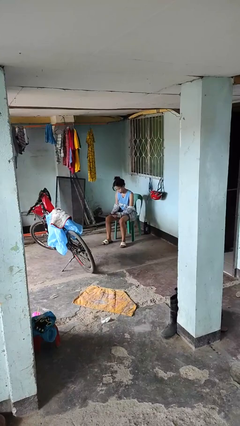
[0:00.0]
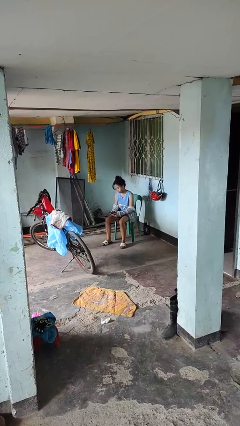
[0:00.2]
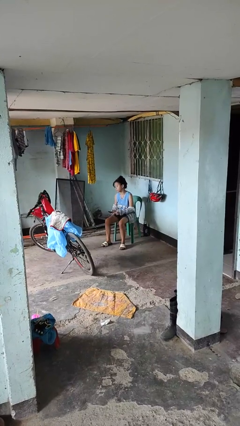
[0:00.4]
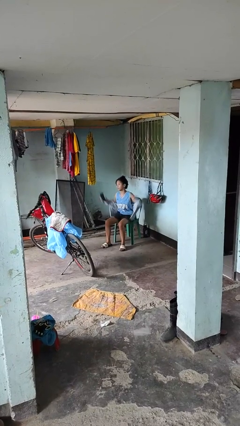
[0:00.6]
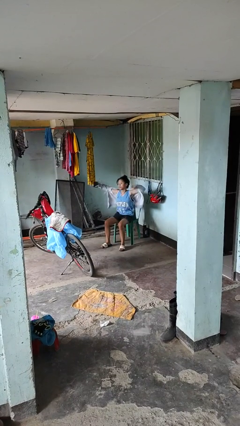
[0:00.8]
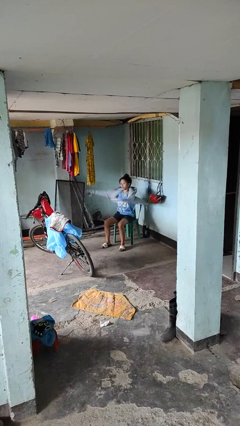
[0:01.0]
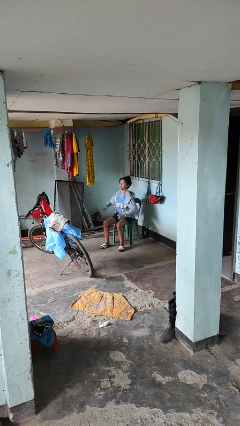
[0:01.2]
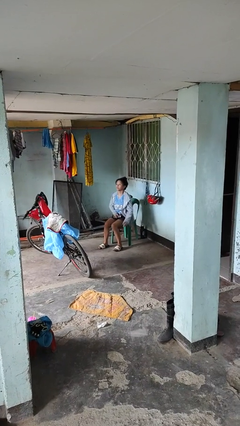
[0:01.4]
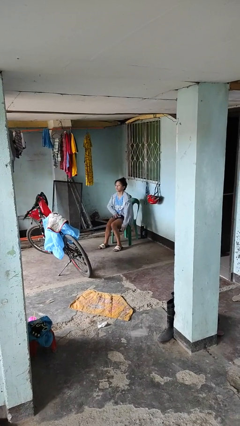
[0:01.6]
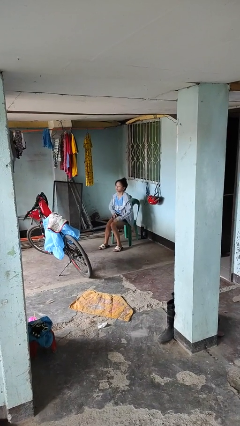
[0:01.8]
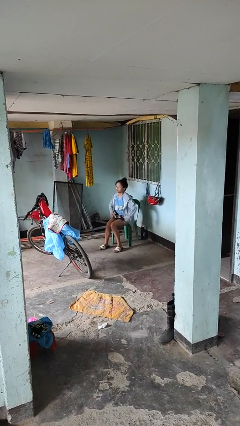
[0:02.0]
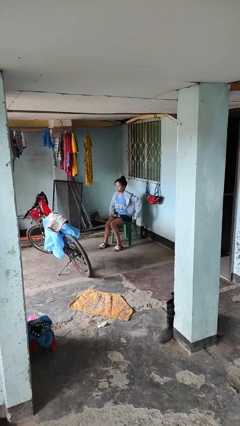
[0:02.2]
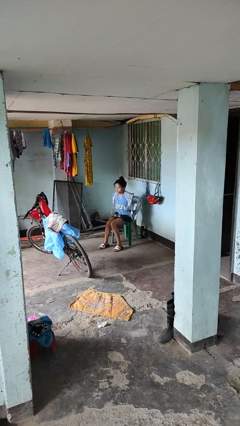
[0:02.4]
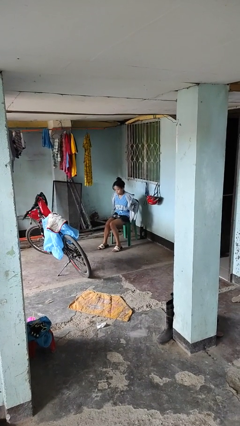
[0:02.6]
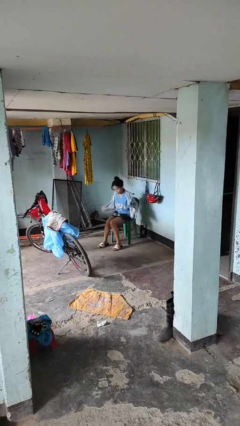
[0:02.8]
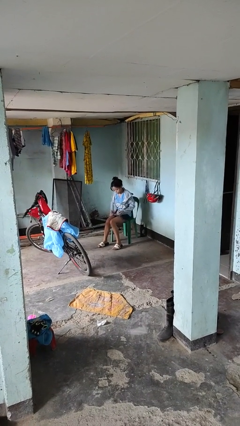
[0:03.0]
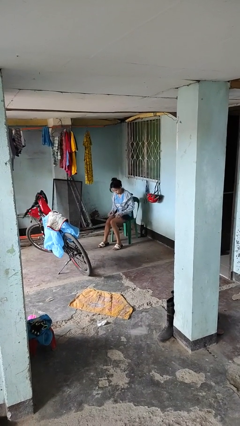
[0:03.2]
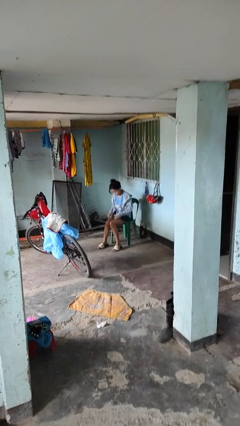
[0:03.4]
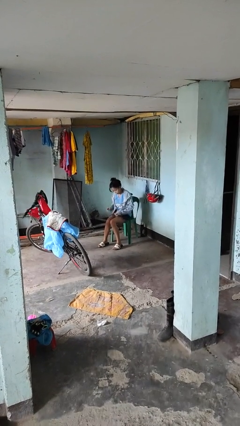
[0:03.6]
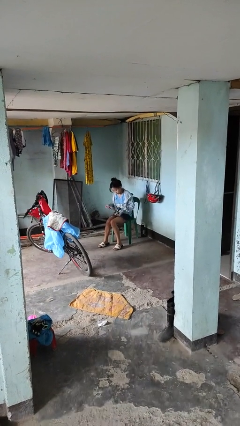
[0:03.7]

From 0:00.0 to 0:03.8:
person puts on jacket

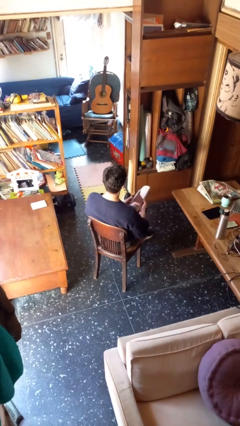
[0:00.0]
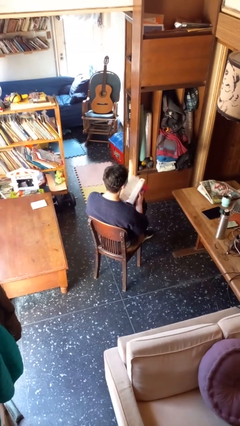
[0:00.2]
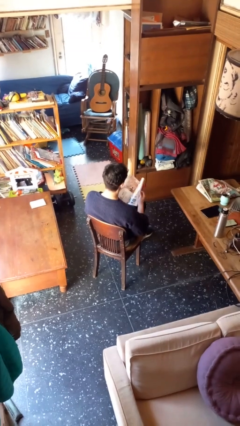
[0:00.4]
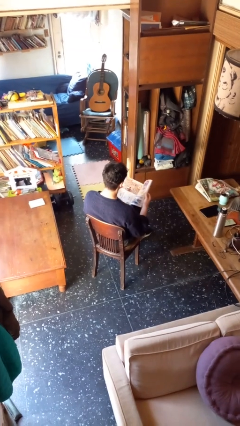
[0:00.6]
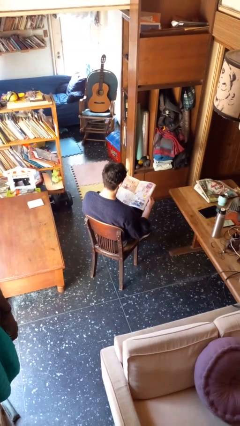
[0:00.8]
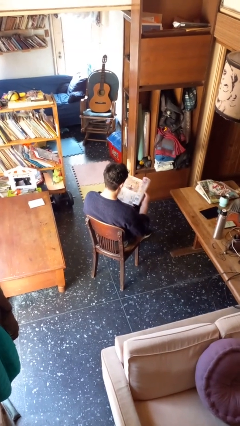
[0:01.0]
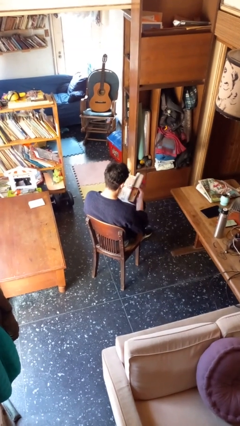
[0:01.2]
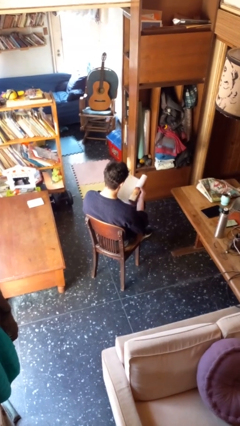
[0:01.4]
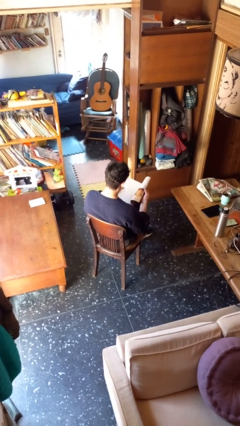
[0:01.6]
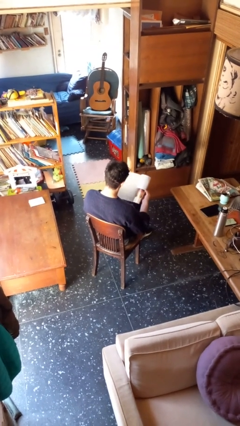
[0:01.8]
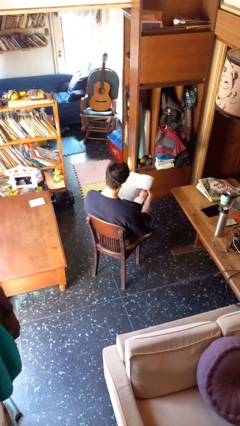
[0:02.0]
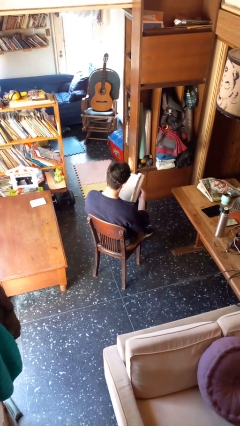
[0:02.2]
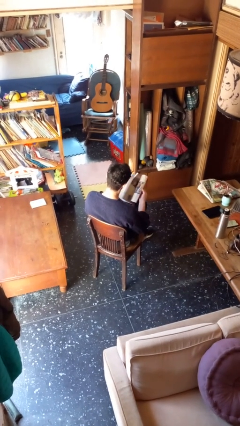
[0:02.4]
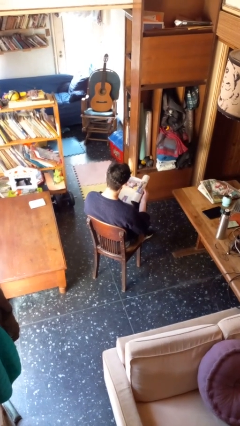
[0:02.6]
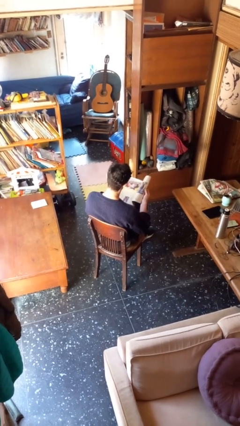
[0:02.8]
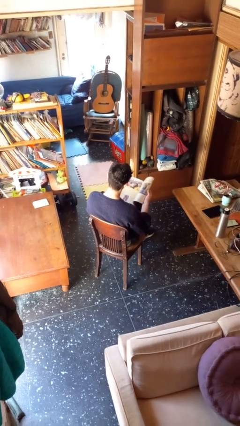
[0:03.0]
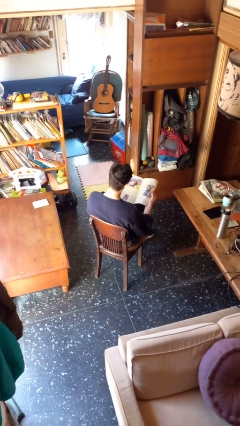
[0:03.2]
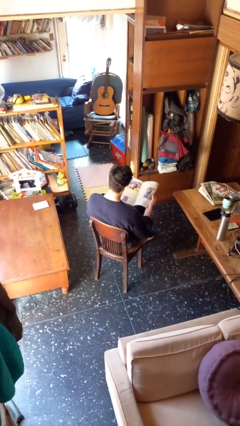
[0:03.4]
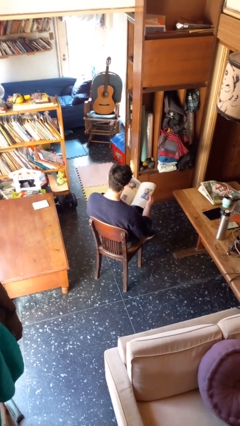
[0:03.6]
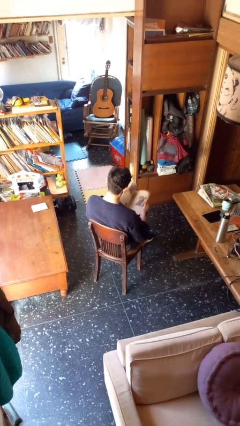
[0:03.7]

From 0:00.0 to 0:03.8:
person reads magazine

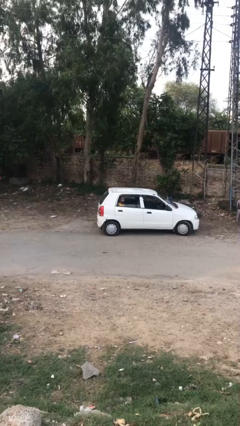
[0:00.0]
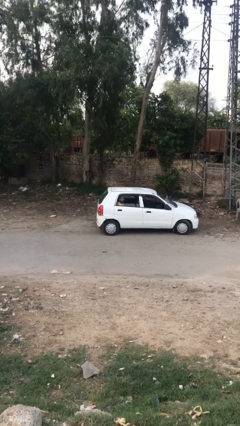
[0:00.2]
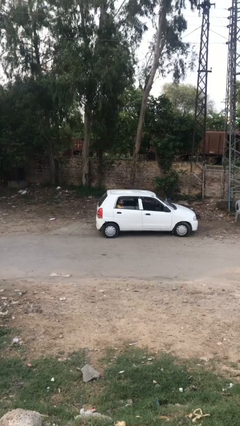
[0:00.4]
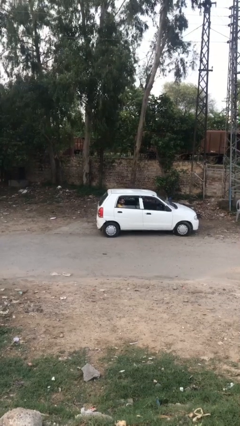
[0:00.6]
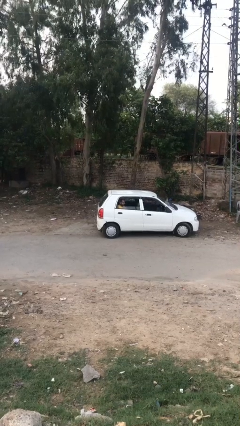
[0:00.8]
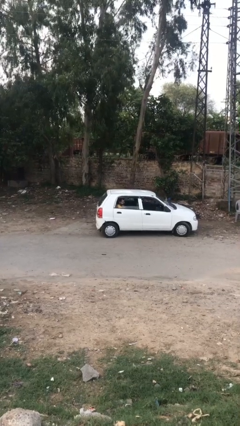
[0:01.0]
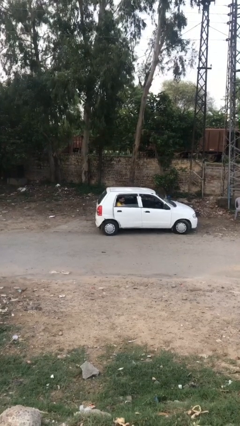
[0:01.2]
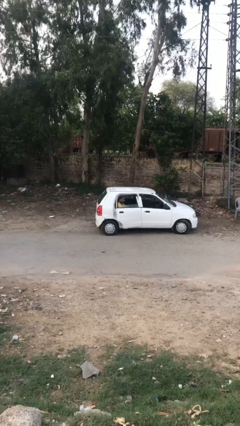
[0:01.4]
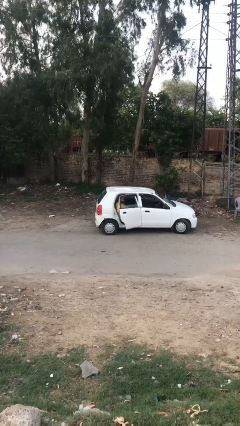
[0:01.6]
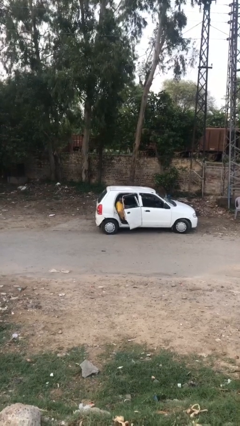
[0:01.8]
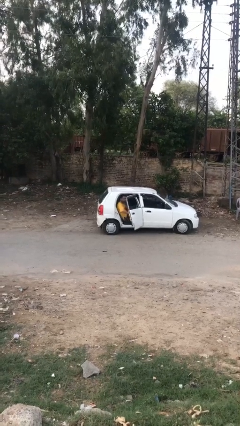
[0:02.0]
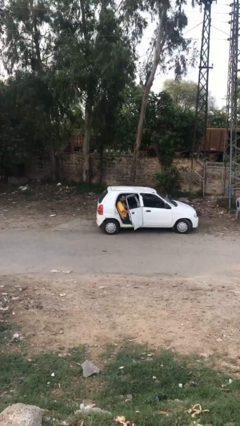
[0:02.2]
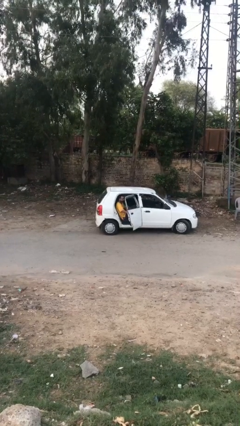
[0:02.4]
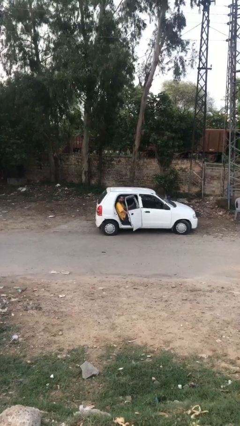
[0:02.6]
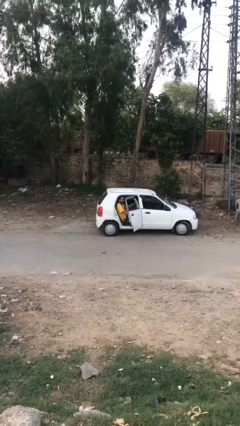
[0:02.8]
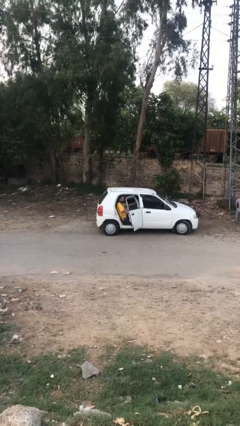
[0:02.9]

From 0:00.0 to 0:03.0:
person opens car door

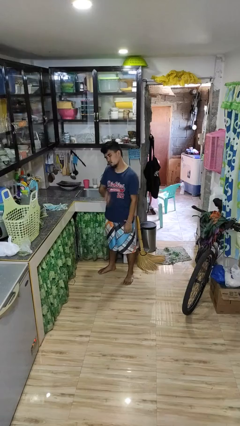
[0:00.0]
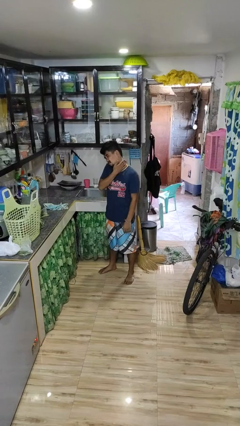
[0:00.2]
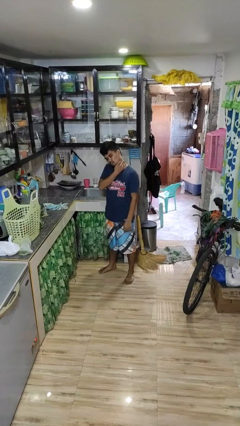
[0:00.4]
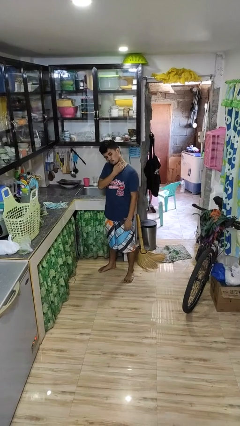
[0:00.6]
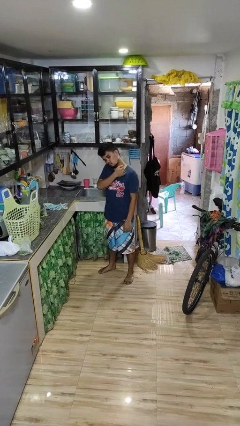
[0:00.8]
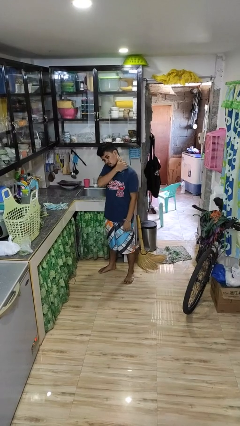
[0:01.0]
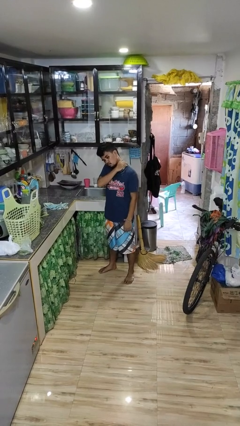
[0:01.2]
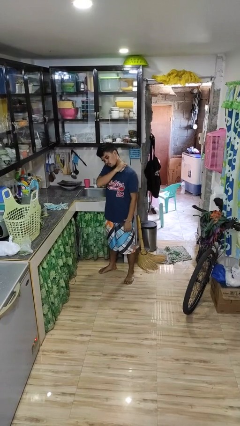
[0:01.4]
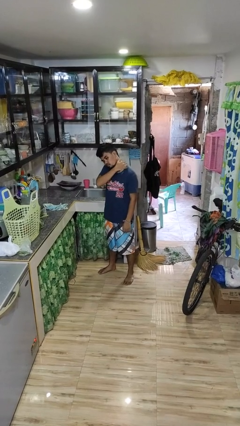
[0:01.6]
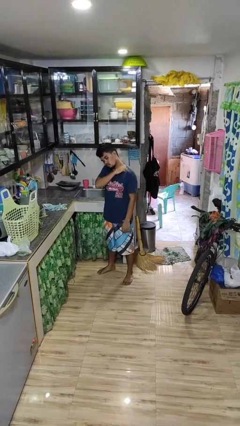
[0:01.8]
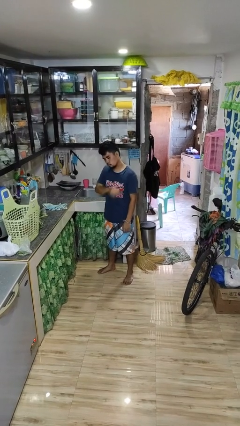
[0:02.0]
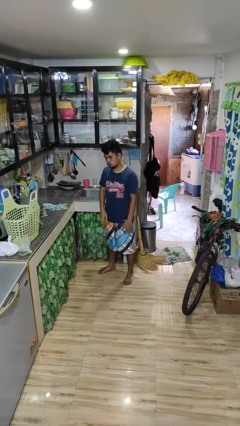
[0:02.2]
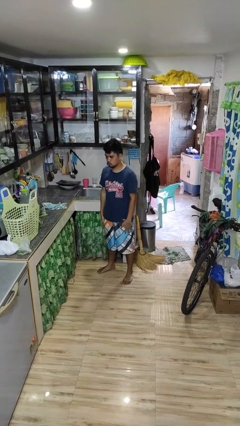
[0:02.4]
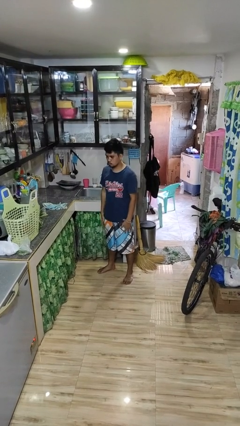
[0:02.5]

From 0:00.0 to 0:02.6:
person swats bug

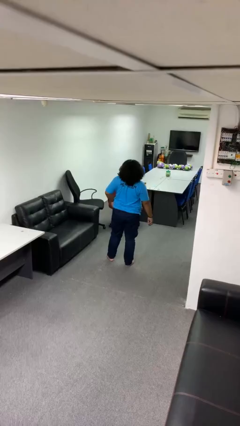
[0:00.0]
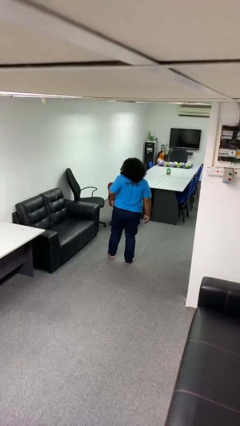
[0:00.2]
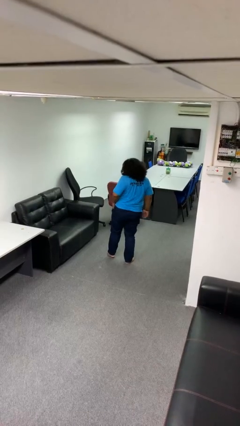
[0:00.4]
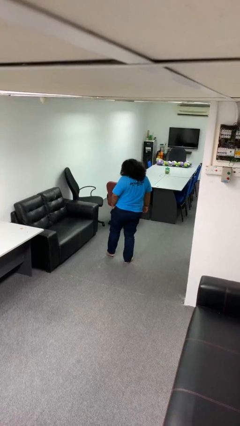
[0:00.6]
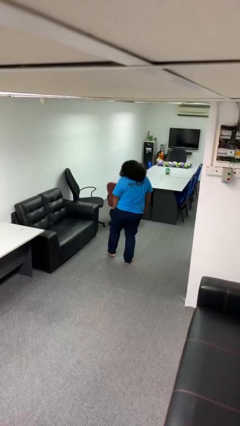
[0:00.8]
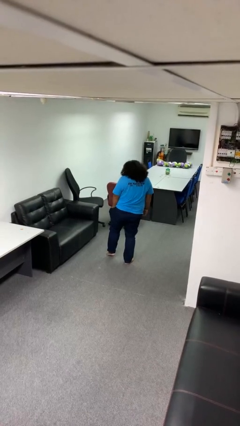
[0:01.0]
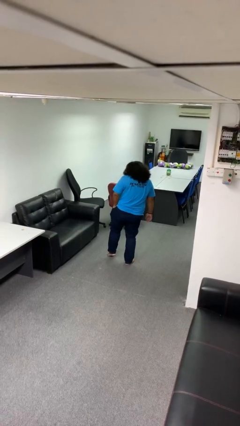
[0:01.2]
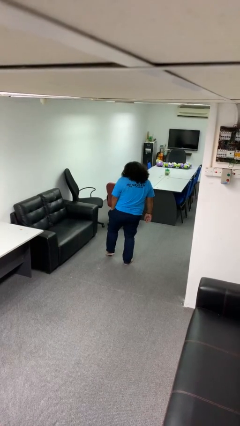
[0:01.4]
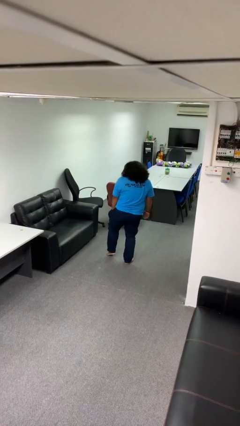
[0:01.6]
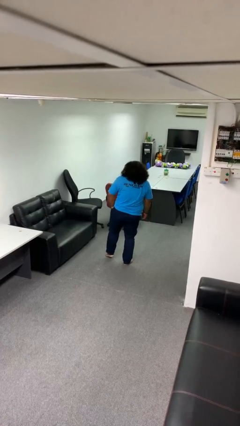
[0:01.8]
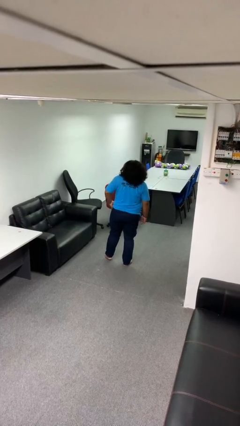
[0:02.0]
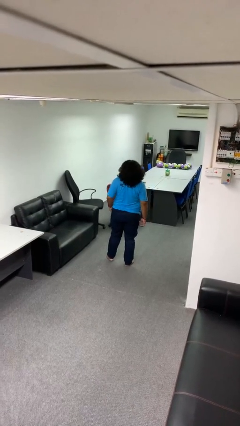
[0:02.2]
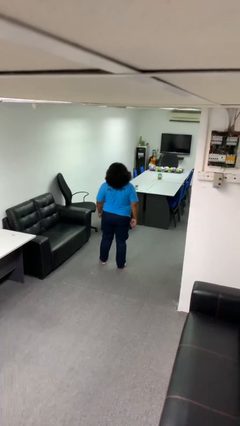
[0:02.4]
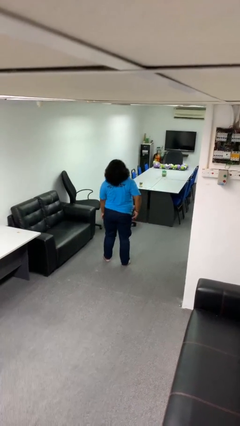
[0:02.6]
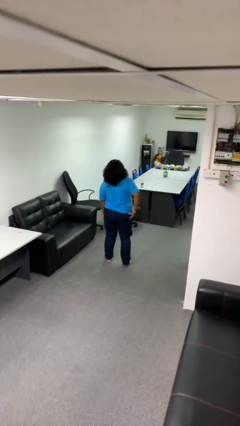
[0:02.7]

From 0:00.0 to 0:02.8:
person puts hands in back pockets

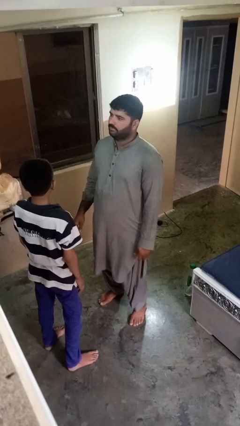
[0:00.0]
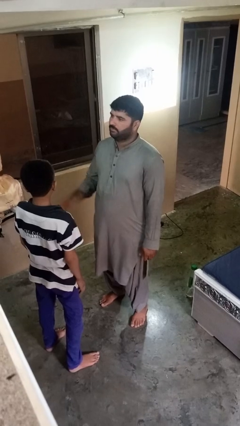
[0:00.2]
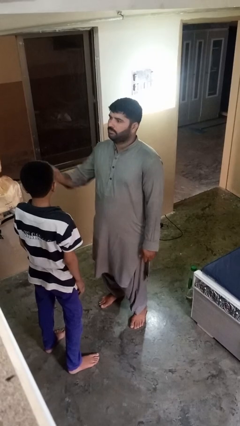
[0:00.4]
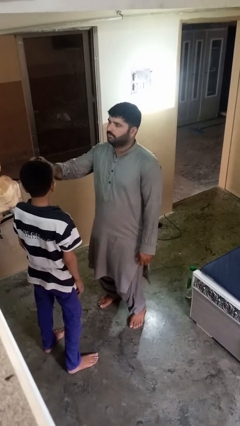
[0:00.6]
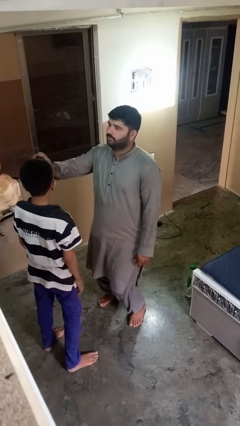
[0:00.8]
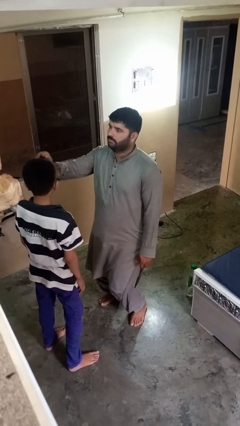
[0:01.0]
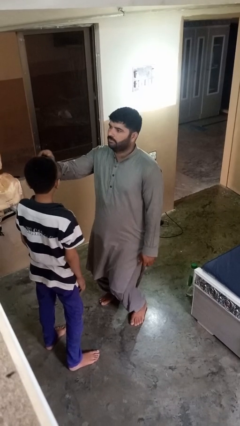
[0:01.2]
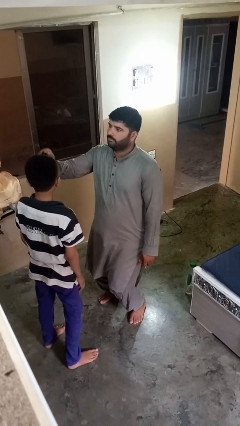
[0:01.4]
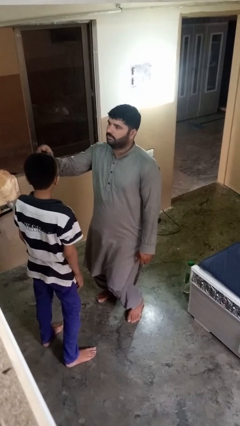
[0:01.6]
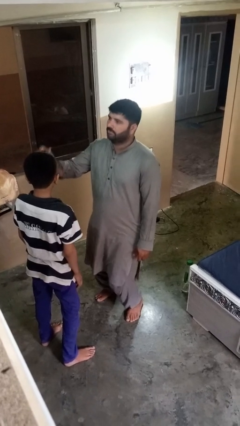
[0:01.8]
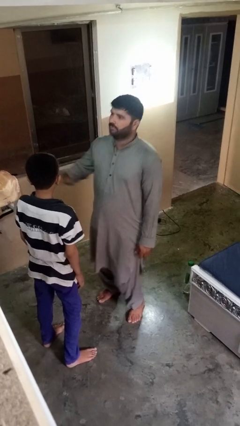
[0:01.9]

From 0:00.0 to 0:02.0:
person braids hair of person
